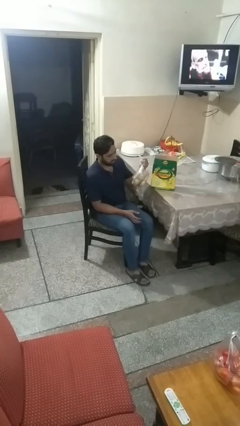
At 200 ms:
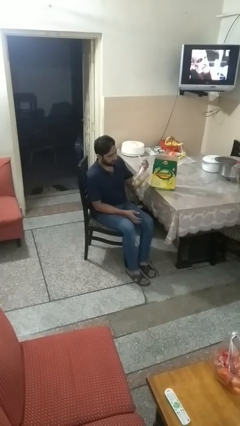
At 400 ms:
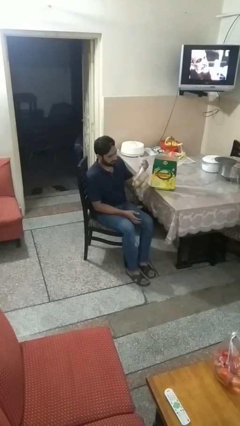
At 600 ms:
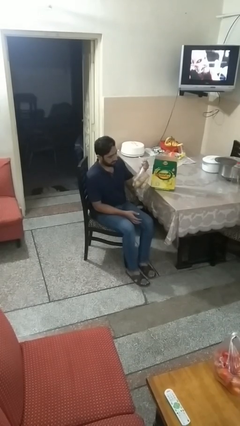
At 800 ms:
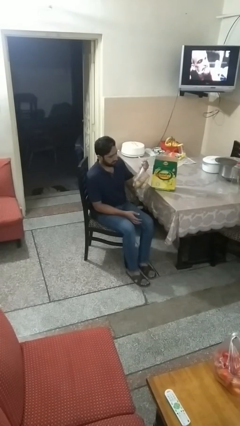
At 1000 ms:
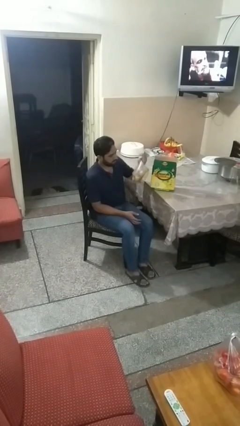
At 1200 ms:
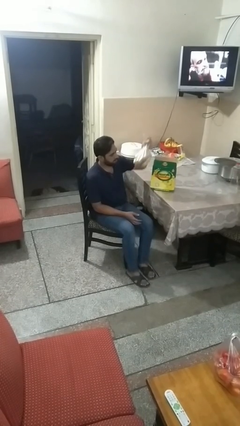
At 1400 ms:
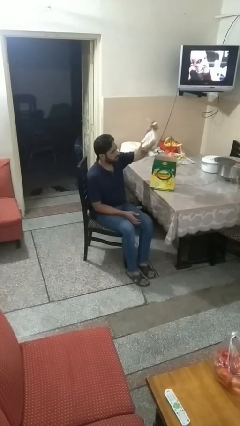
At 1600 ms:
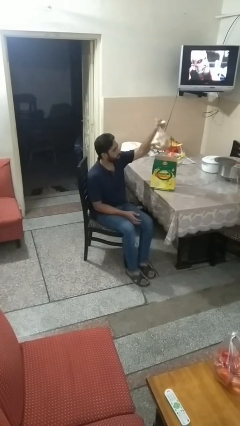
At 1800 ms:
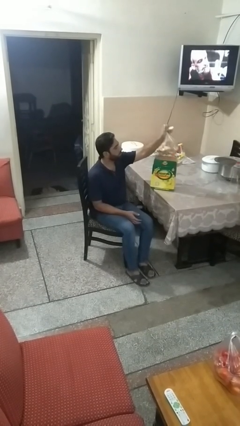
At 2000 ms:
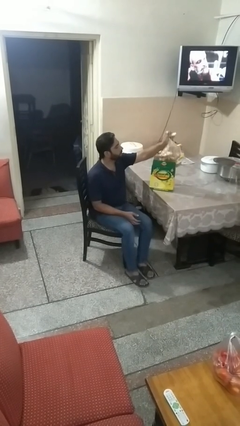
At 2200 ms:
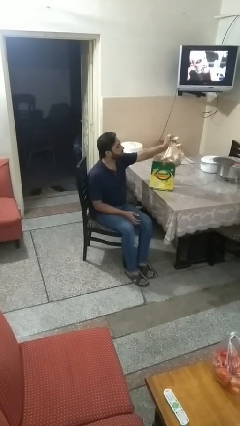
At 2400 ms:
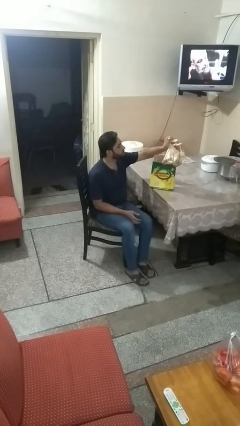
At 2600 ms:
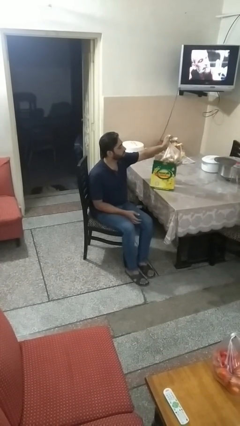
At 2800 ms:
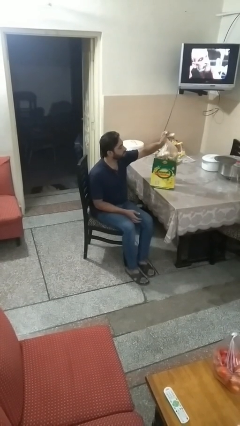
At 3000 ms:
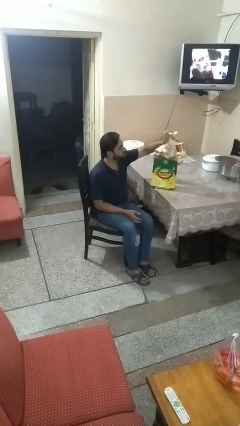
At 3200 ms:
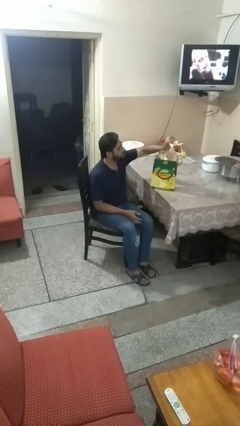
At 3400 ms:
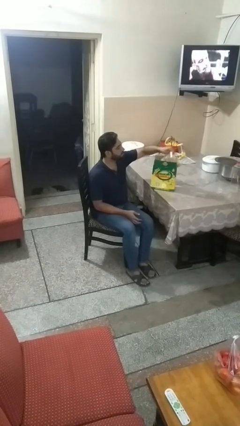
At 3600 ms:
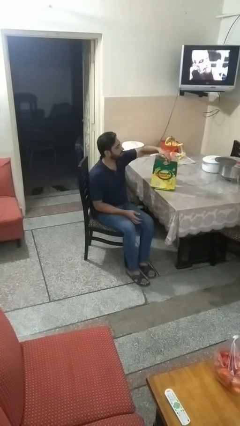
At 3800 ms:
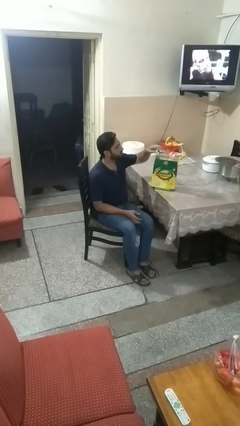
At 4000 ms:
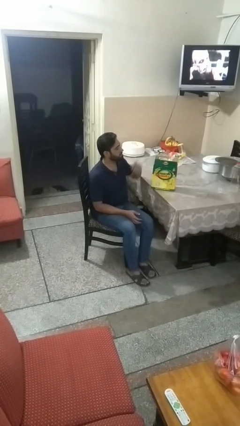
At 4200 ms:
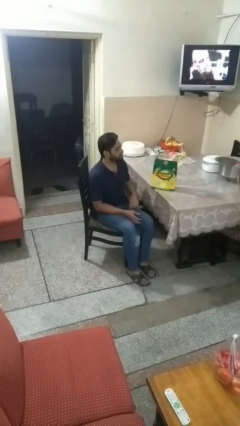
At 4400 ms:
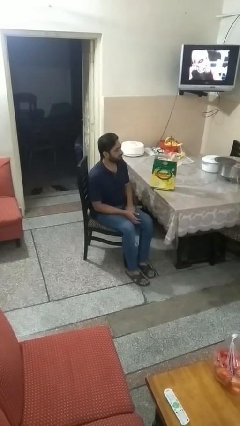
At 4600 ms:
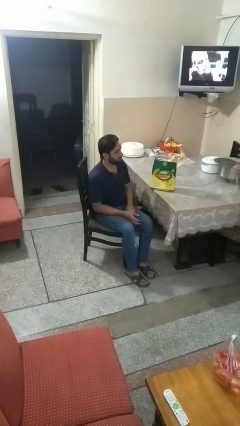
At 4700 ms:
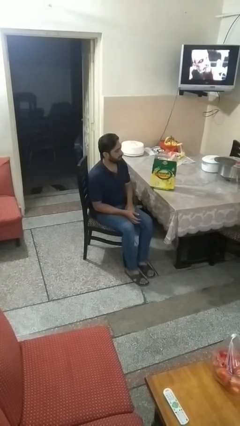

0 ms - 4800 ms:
person puts object into box

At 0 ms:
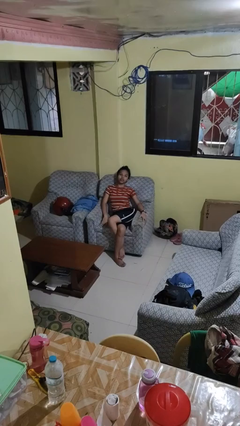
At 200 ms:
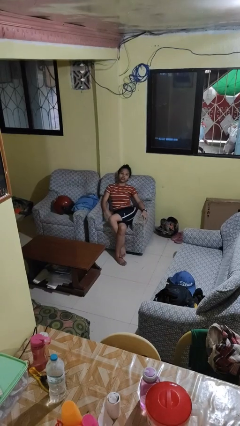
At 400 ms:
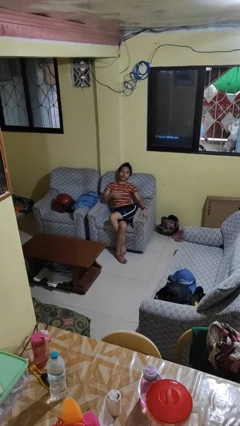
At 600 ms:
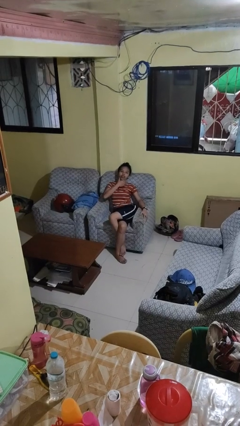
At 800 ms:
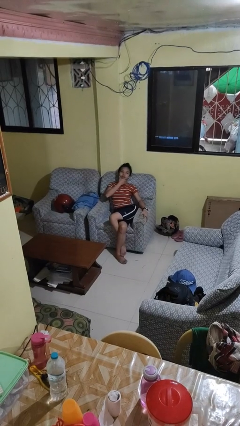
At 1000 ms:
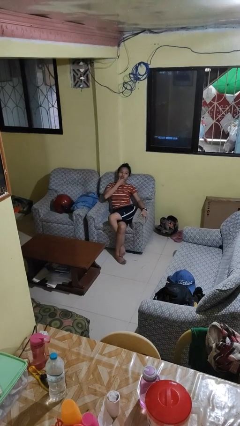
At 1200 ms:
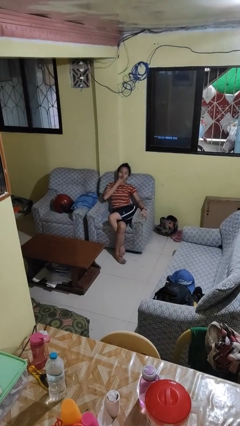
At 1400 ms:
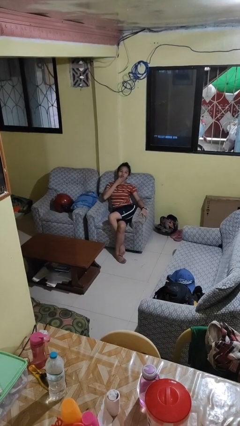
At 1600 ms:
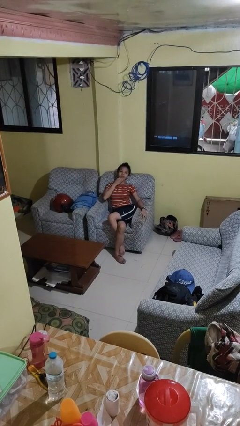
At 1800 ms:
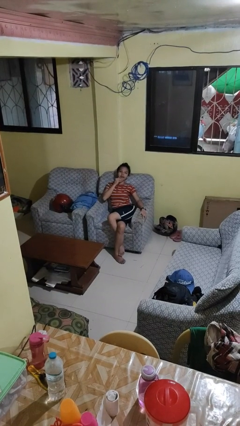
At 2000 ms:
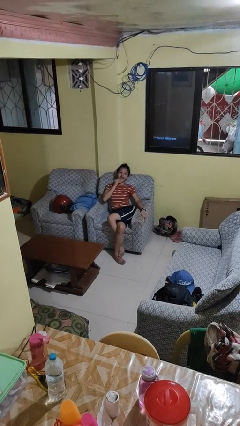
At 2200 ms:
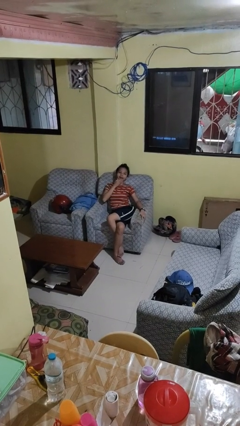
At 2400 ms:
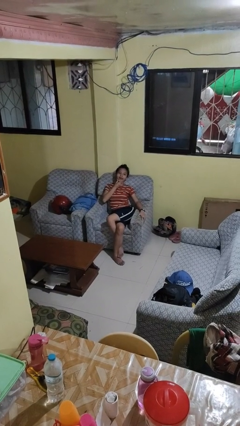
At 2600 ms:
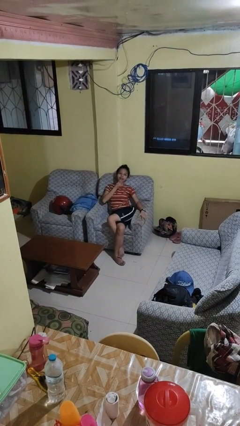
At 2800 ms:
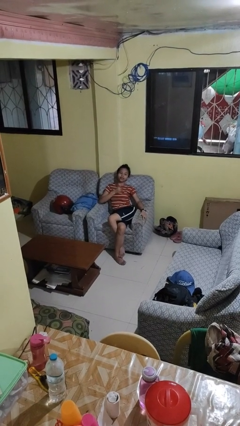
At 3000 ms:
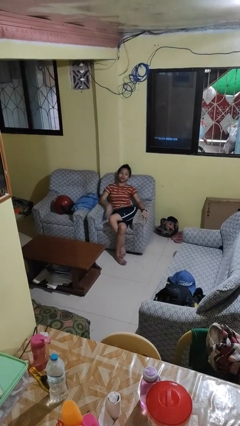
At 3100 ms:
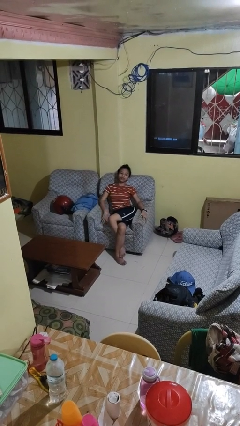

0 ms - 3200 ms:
person strokes chin

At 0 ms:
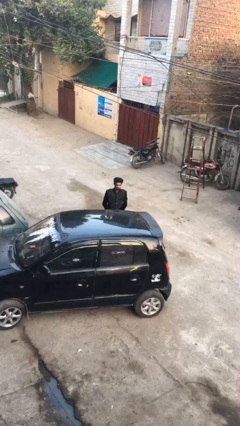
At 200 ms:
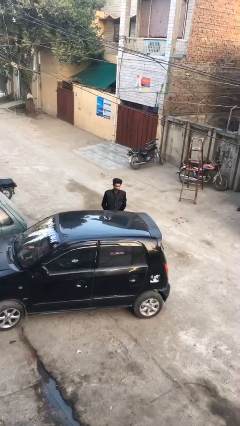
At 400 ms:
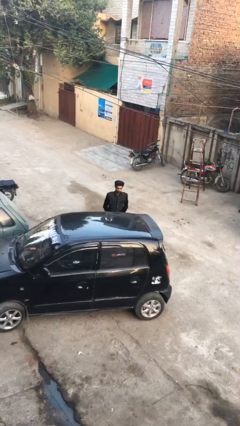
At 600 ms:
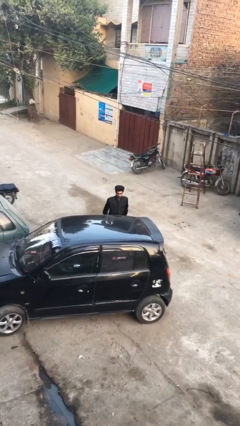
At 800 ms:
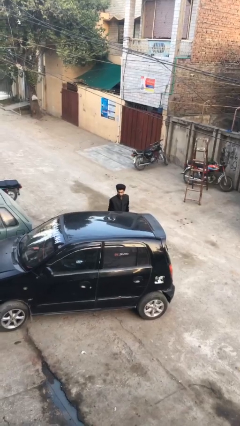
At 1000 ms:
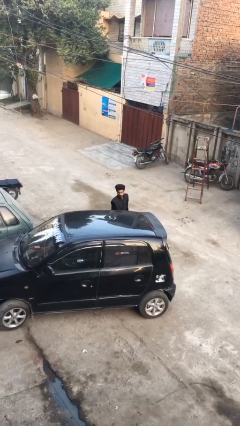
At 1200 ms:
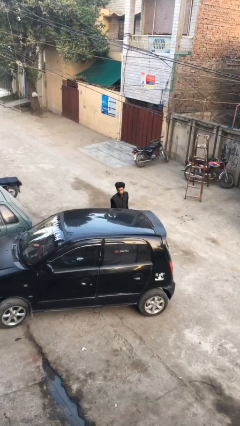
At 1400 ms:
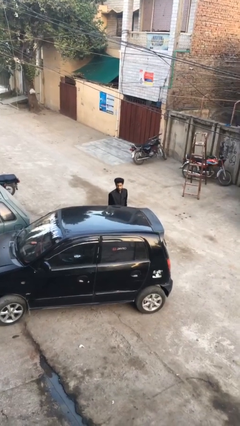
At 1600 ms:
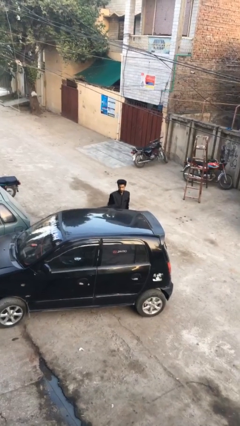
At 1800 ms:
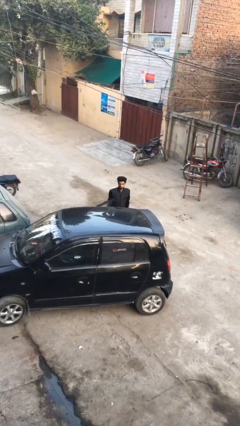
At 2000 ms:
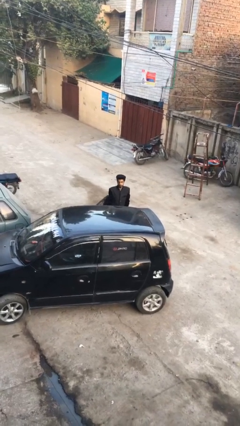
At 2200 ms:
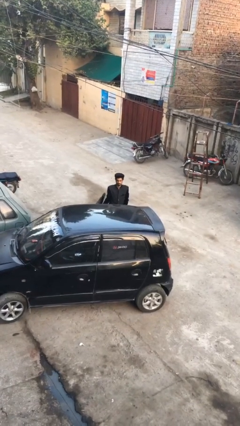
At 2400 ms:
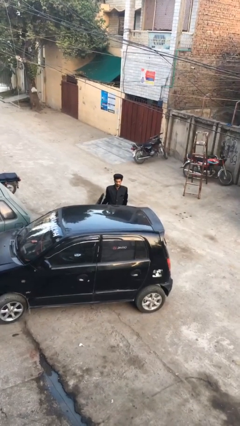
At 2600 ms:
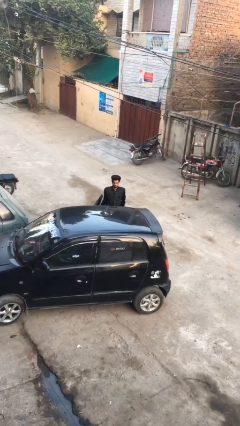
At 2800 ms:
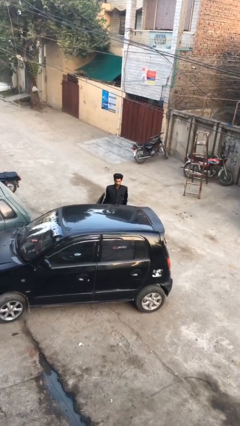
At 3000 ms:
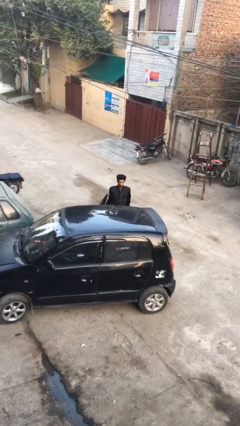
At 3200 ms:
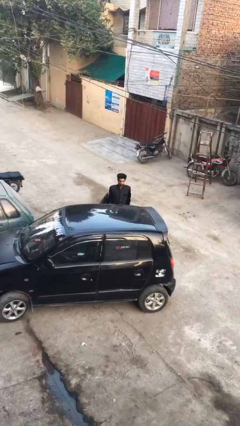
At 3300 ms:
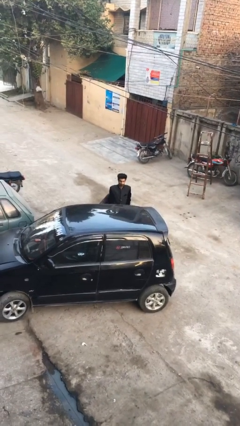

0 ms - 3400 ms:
person opens car door

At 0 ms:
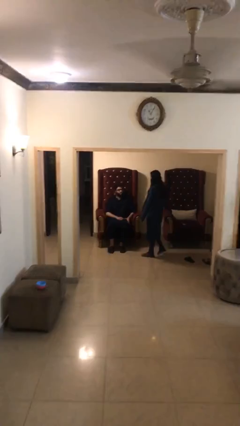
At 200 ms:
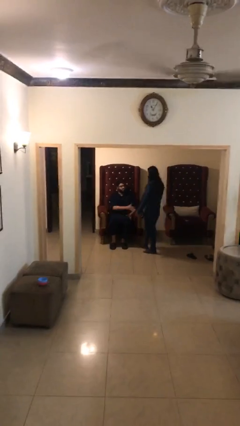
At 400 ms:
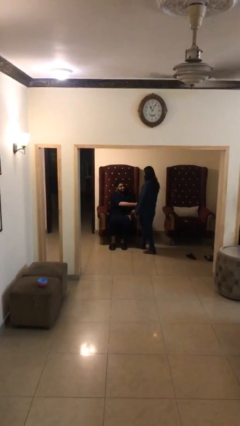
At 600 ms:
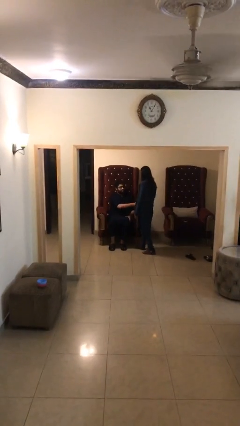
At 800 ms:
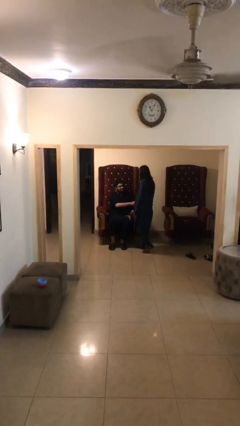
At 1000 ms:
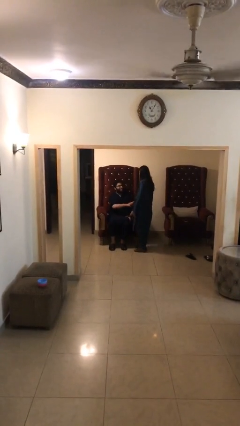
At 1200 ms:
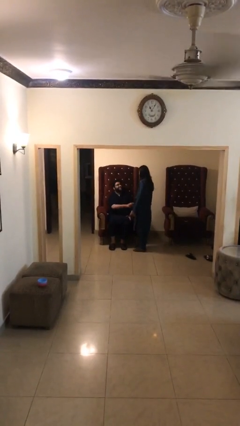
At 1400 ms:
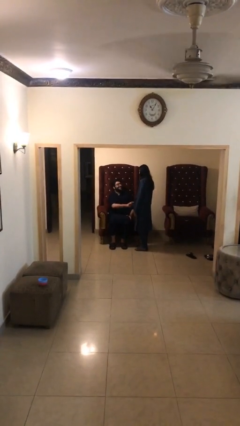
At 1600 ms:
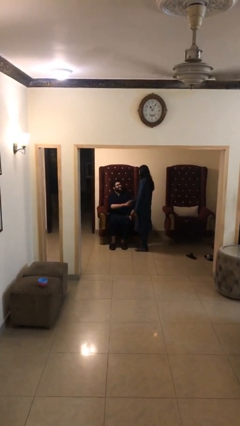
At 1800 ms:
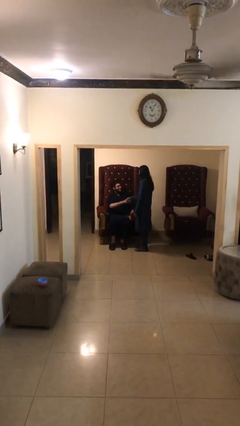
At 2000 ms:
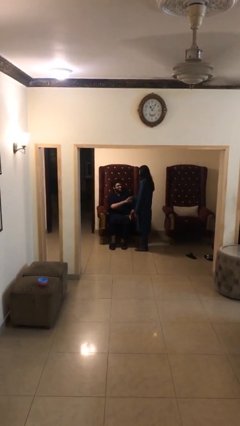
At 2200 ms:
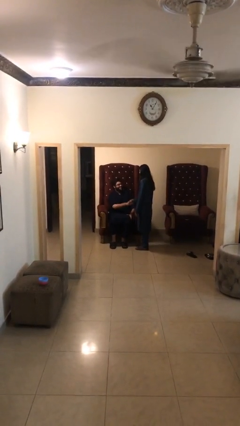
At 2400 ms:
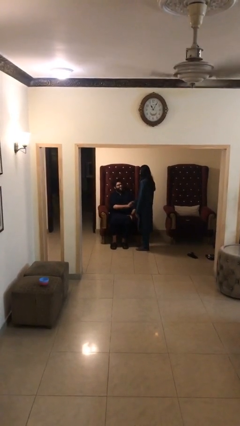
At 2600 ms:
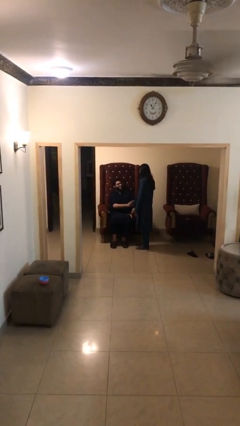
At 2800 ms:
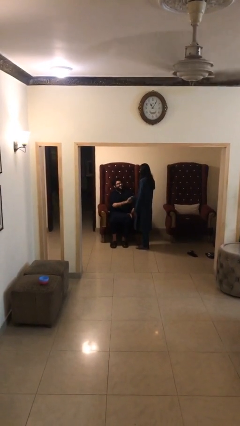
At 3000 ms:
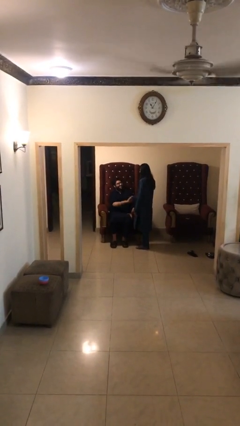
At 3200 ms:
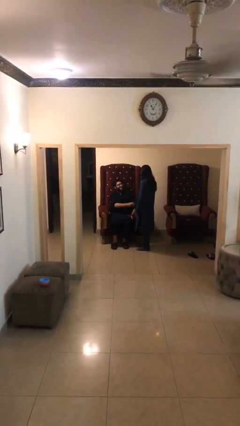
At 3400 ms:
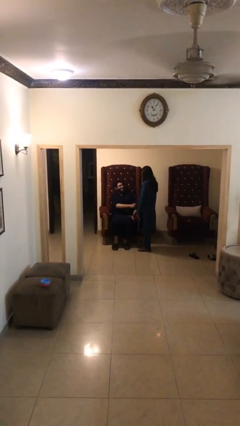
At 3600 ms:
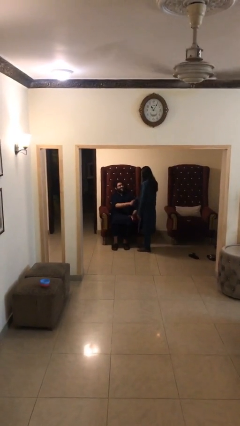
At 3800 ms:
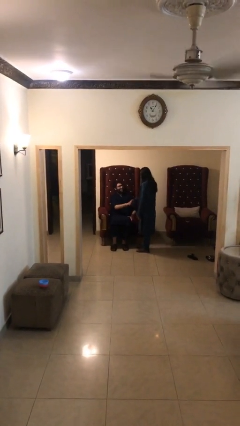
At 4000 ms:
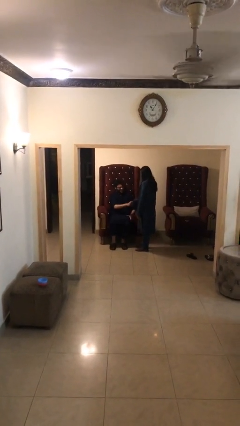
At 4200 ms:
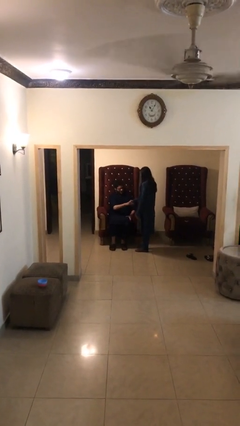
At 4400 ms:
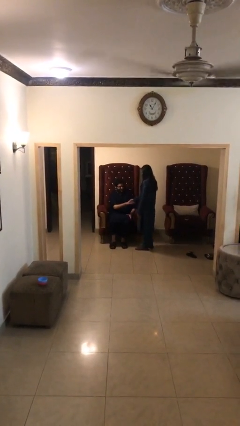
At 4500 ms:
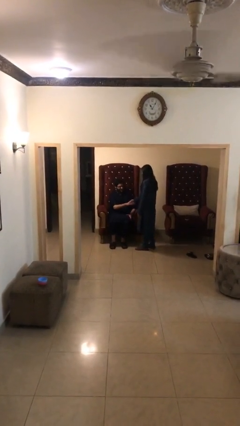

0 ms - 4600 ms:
person shakes hand

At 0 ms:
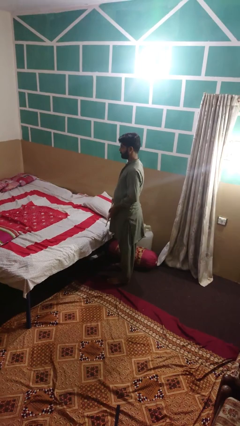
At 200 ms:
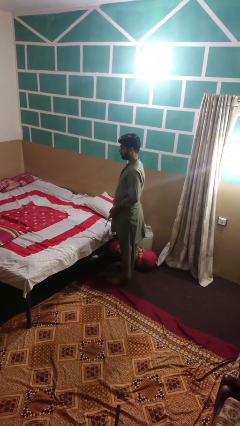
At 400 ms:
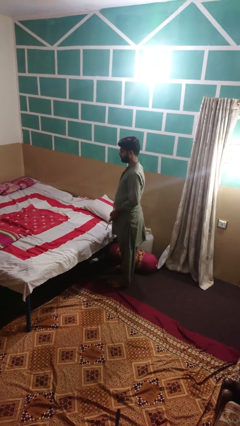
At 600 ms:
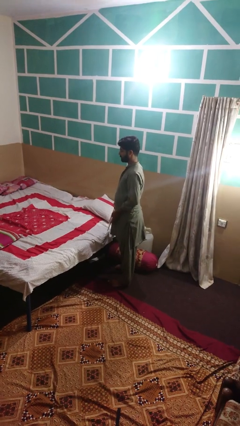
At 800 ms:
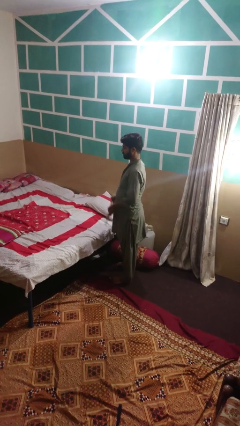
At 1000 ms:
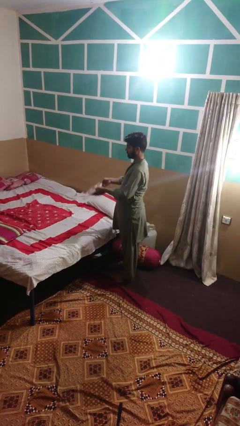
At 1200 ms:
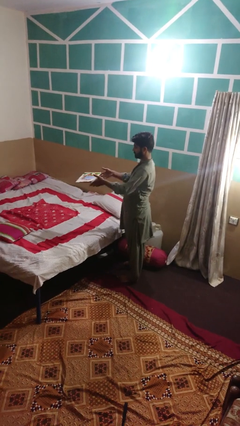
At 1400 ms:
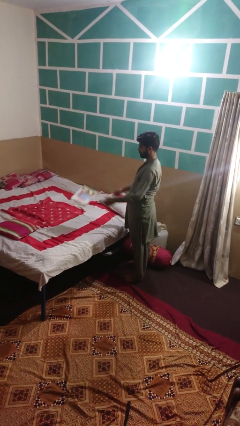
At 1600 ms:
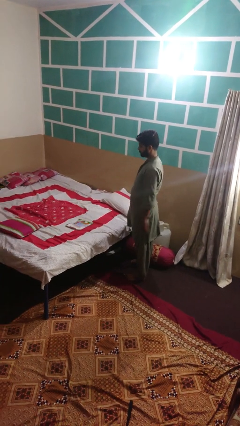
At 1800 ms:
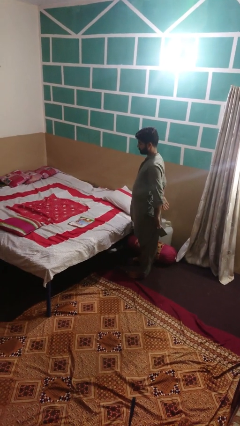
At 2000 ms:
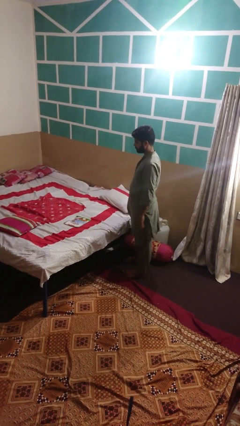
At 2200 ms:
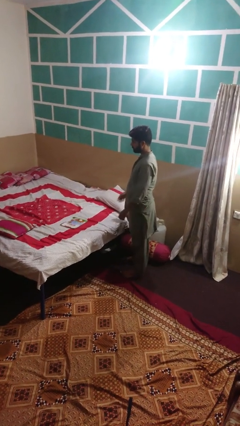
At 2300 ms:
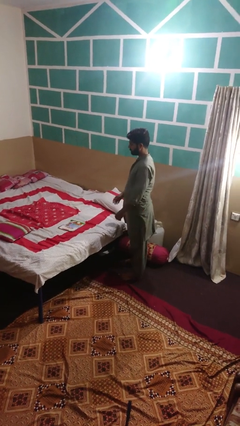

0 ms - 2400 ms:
person throws object on bed
